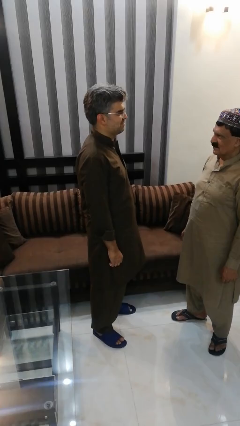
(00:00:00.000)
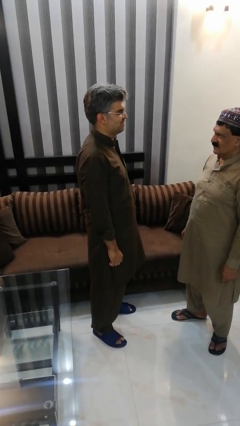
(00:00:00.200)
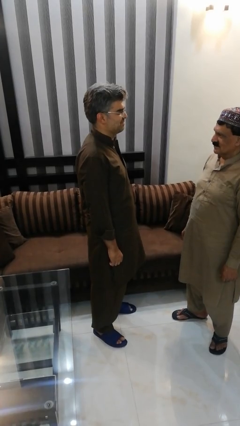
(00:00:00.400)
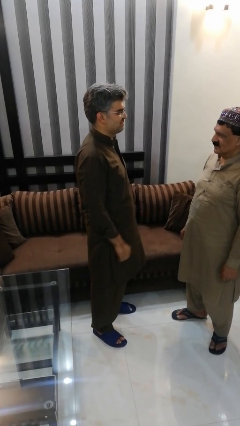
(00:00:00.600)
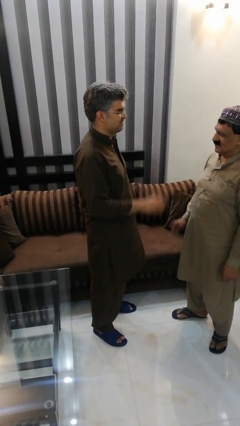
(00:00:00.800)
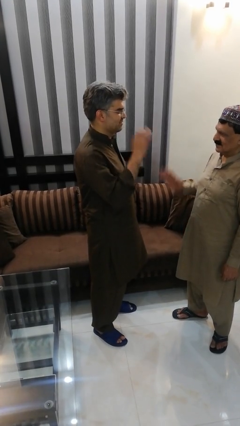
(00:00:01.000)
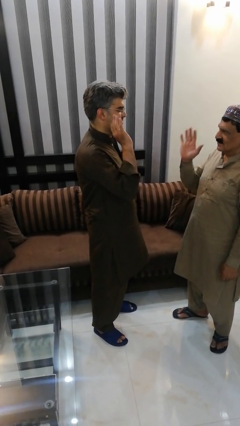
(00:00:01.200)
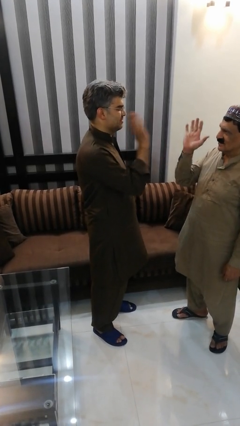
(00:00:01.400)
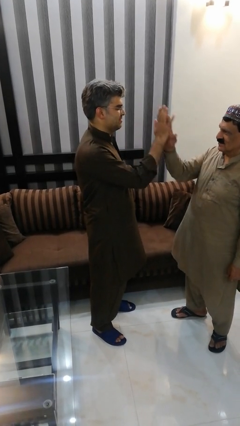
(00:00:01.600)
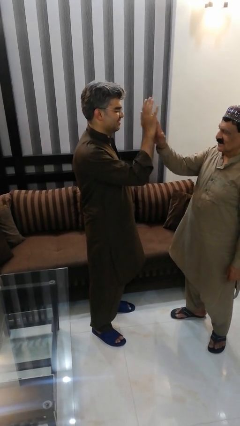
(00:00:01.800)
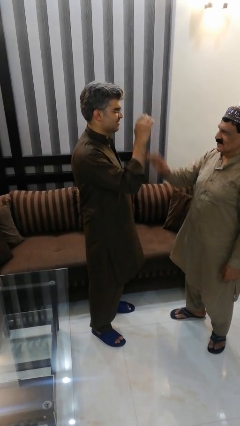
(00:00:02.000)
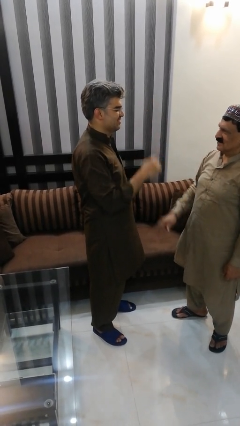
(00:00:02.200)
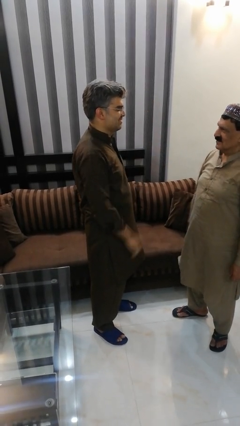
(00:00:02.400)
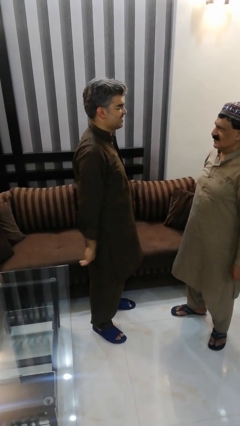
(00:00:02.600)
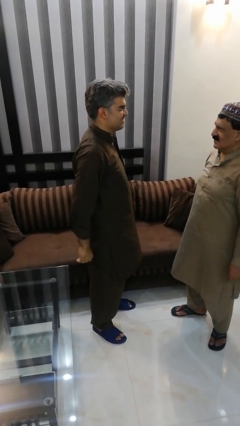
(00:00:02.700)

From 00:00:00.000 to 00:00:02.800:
person highfives hand

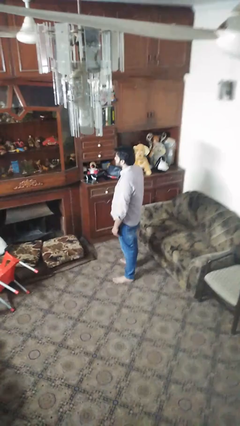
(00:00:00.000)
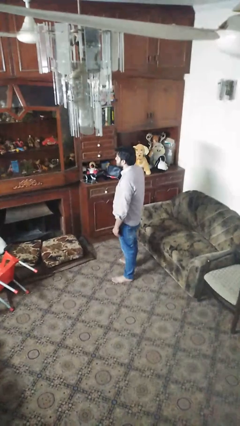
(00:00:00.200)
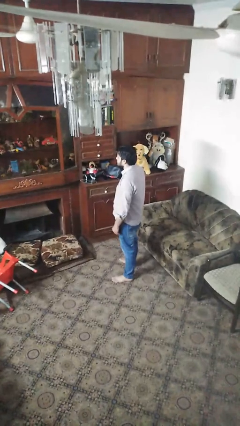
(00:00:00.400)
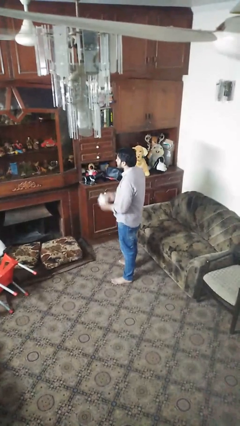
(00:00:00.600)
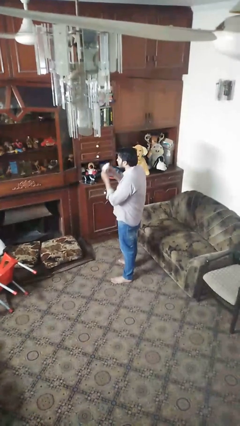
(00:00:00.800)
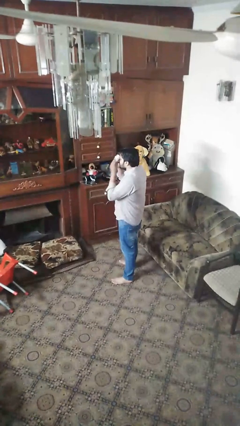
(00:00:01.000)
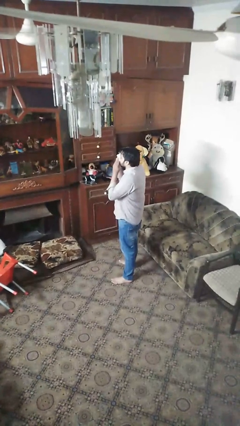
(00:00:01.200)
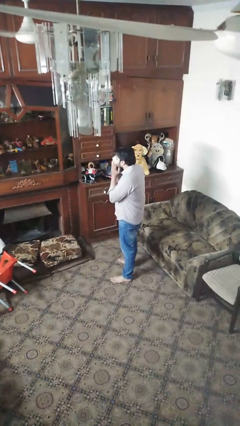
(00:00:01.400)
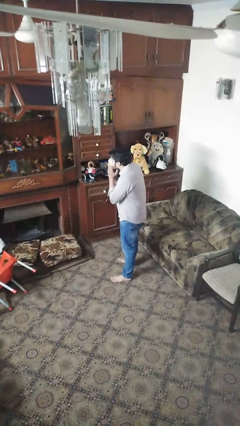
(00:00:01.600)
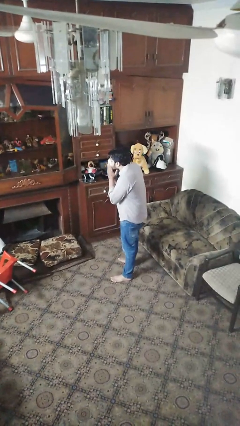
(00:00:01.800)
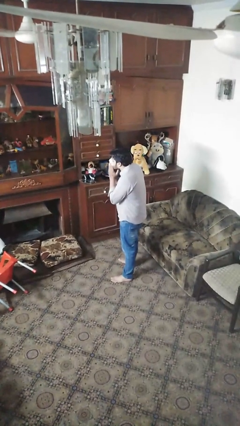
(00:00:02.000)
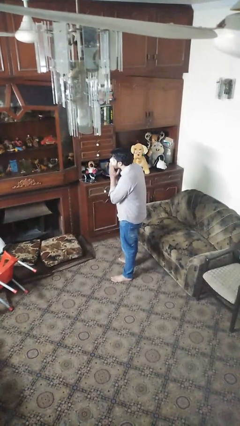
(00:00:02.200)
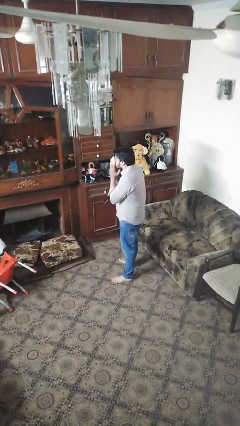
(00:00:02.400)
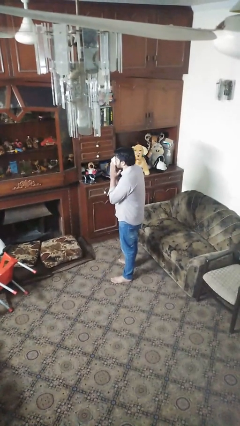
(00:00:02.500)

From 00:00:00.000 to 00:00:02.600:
person blows nose

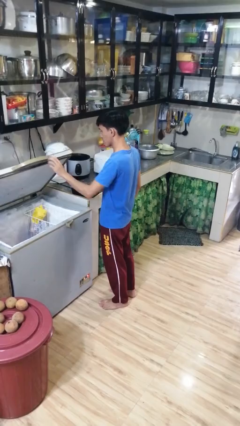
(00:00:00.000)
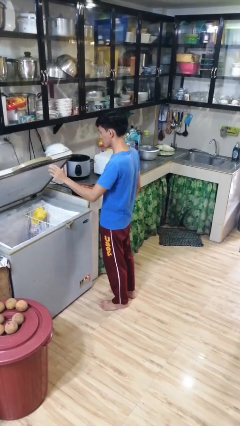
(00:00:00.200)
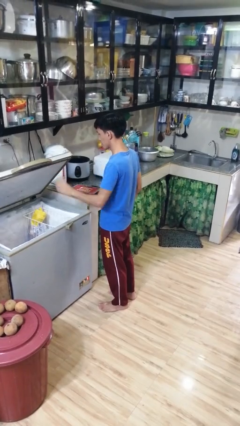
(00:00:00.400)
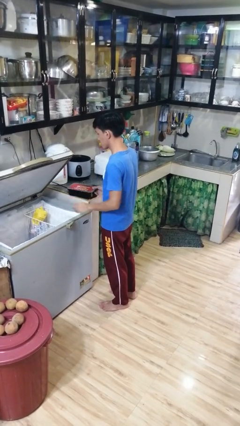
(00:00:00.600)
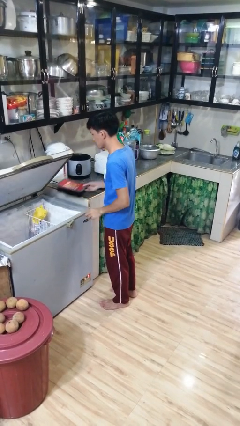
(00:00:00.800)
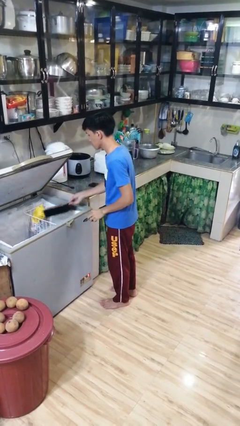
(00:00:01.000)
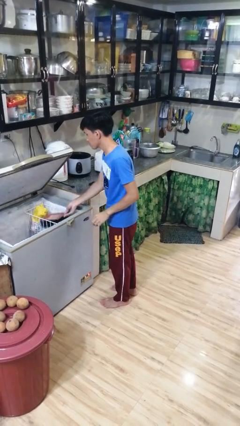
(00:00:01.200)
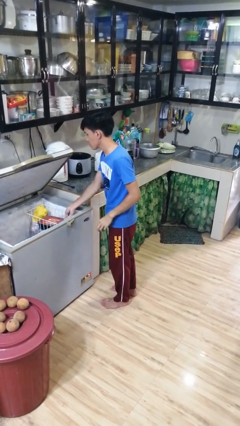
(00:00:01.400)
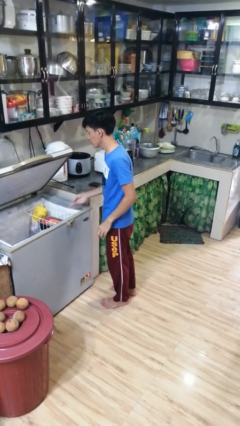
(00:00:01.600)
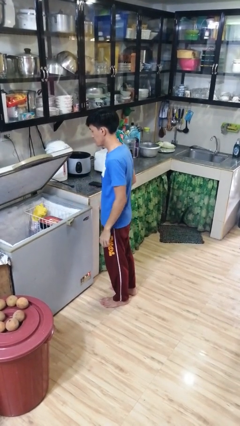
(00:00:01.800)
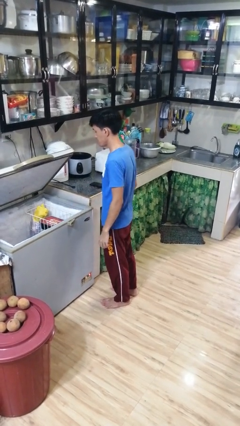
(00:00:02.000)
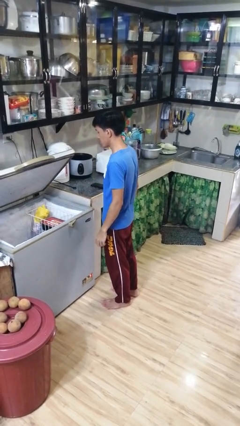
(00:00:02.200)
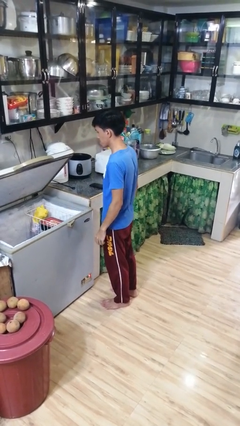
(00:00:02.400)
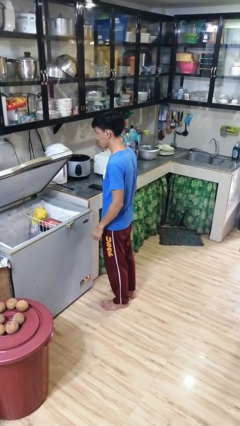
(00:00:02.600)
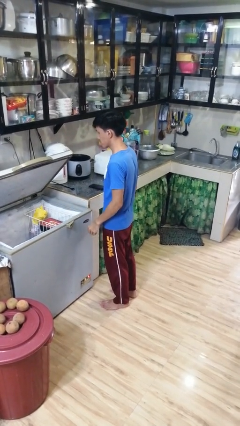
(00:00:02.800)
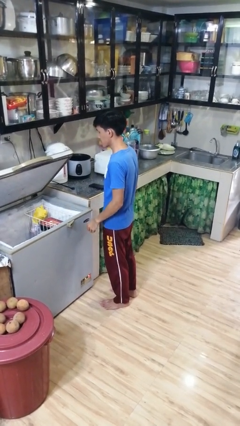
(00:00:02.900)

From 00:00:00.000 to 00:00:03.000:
person puts object into refrigerator

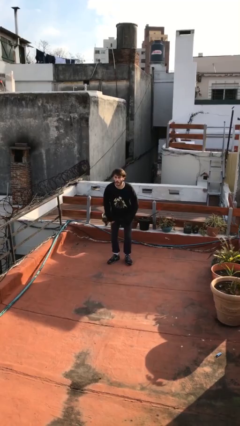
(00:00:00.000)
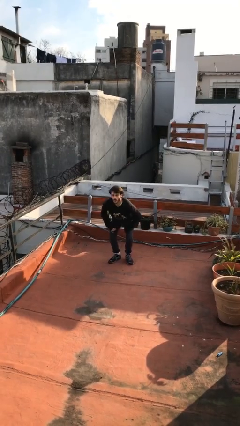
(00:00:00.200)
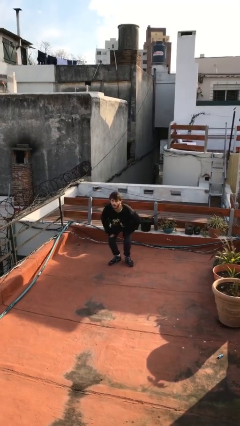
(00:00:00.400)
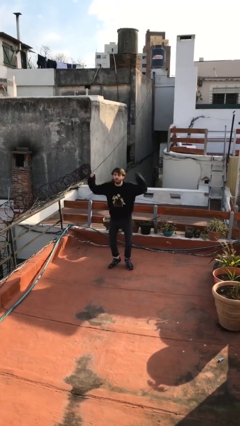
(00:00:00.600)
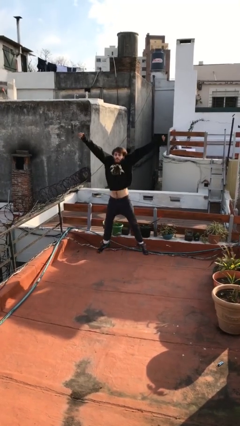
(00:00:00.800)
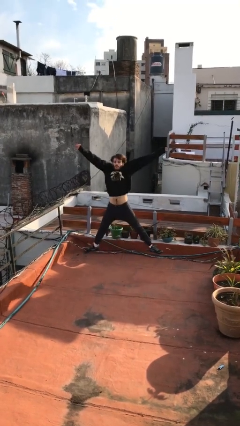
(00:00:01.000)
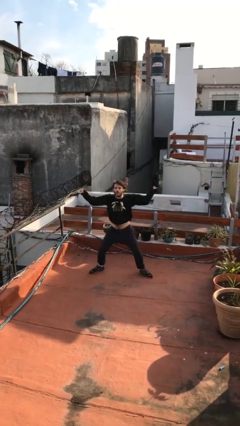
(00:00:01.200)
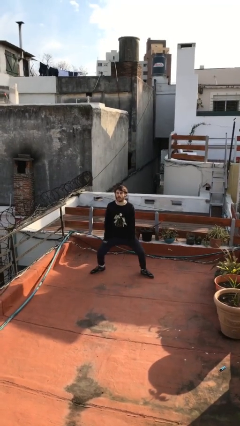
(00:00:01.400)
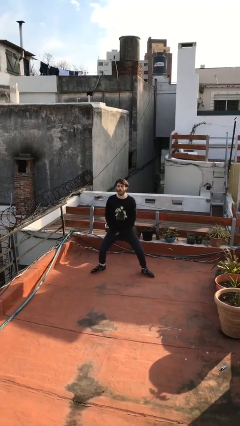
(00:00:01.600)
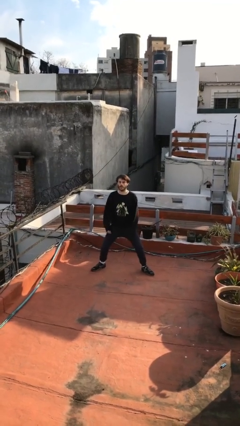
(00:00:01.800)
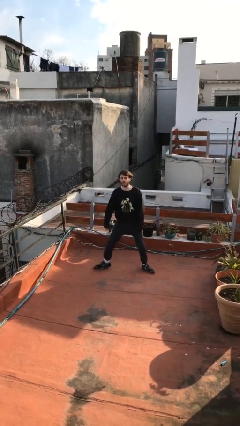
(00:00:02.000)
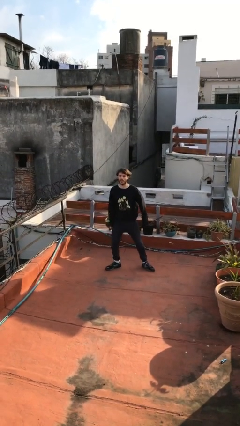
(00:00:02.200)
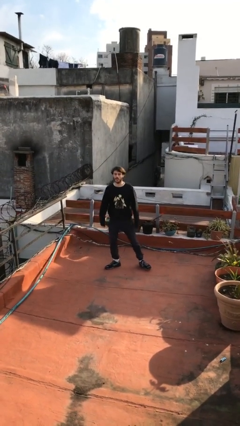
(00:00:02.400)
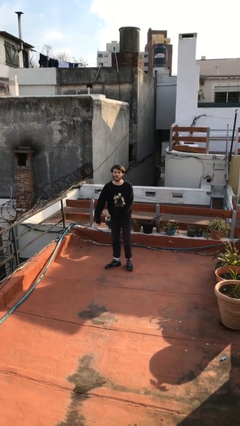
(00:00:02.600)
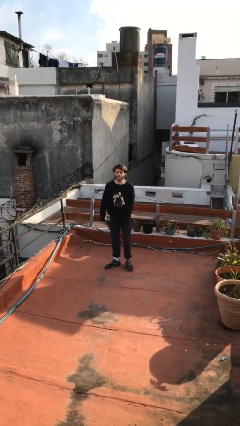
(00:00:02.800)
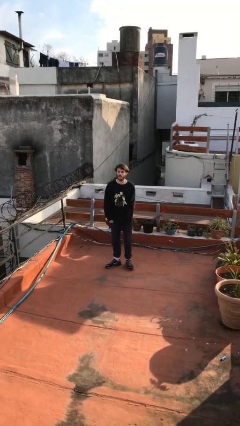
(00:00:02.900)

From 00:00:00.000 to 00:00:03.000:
person exercises with jumping jacks

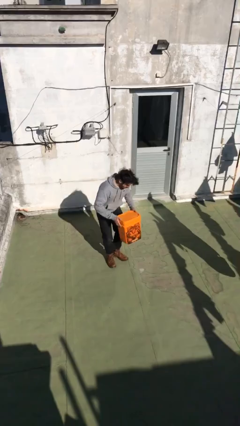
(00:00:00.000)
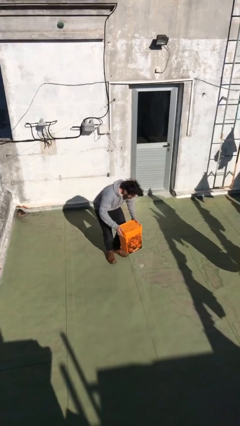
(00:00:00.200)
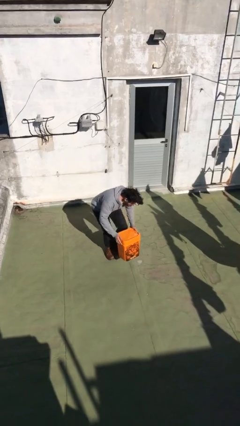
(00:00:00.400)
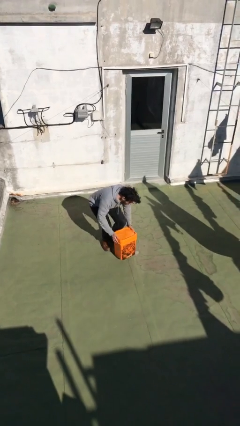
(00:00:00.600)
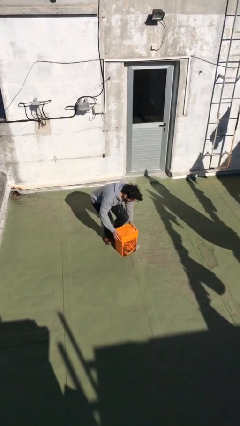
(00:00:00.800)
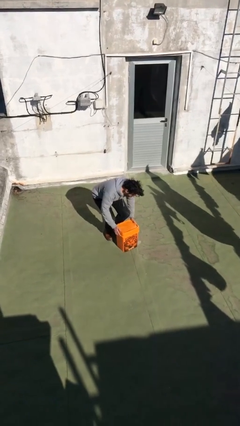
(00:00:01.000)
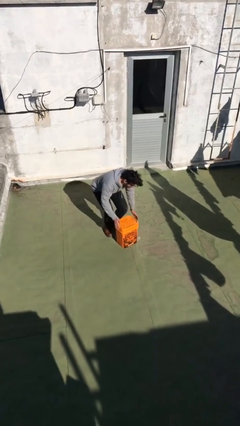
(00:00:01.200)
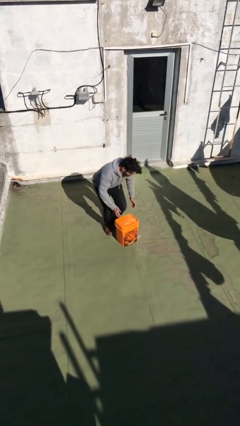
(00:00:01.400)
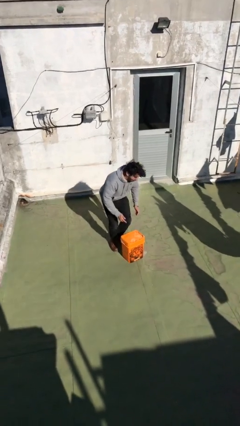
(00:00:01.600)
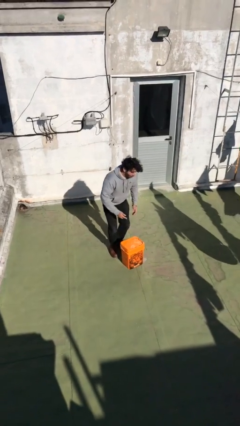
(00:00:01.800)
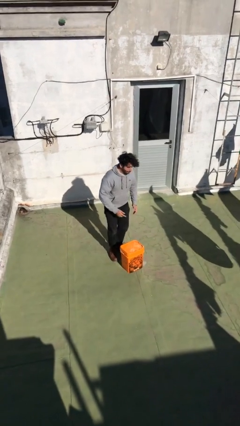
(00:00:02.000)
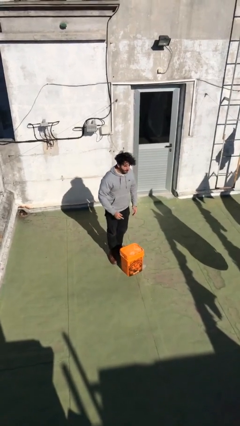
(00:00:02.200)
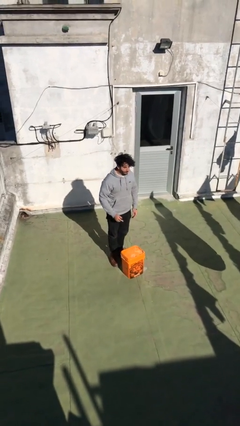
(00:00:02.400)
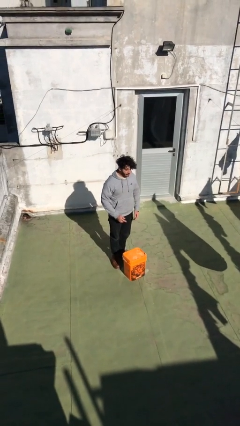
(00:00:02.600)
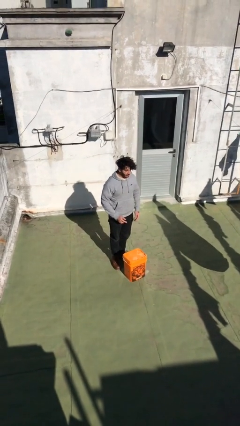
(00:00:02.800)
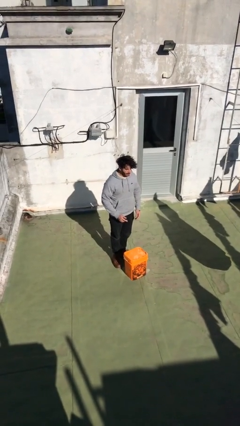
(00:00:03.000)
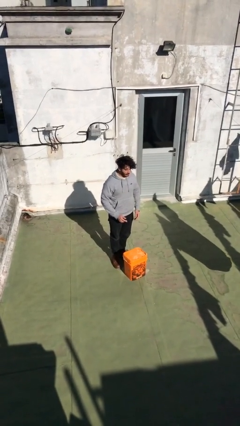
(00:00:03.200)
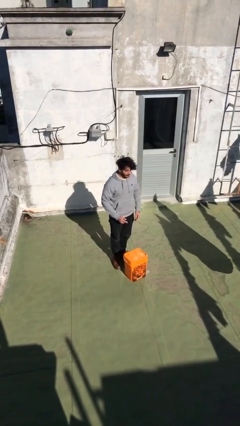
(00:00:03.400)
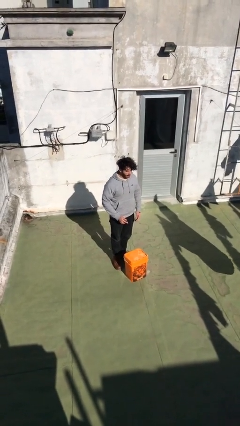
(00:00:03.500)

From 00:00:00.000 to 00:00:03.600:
person puts down object on floor

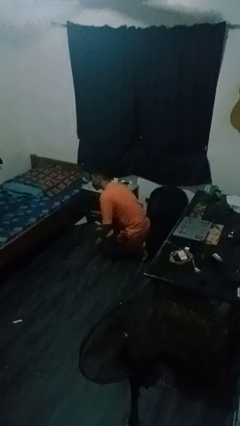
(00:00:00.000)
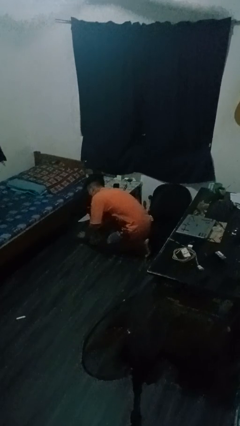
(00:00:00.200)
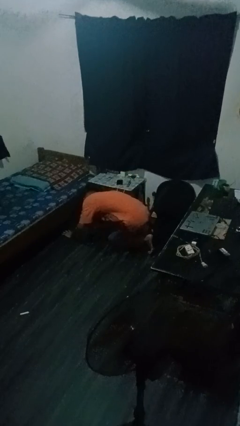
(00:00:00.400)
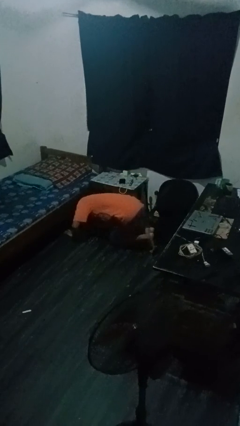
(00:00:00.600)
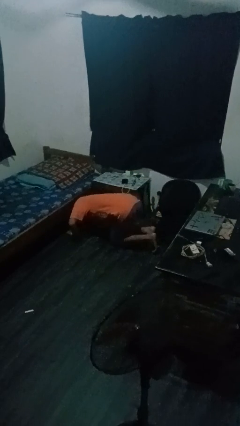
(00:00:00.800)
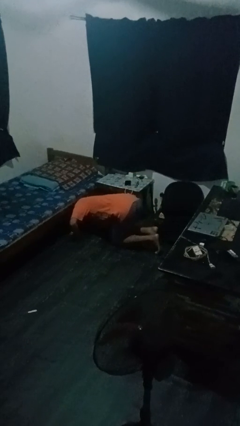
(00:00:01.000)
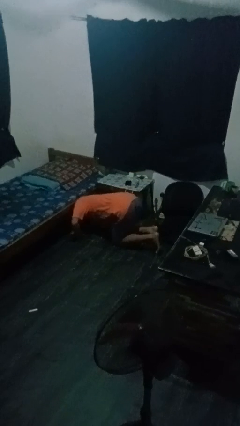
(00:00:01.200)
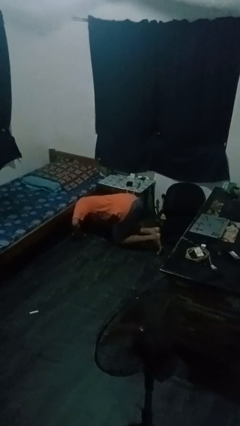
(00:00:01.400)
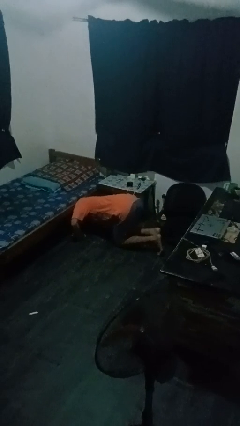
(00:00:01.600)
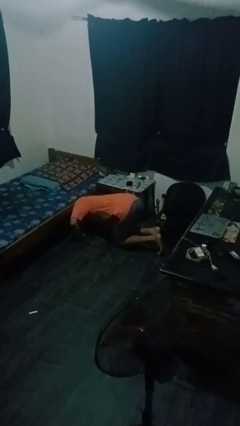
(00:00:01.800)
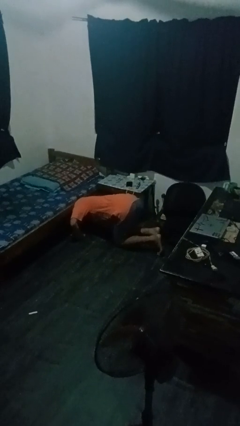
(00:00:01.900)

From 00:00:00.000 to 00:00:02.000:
person searches under bed
